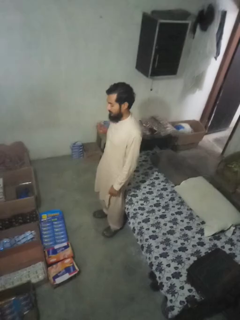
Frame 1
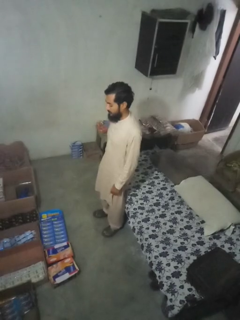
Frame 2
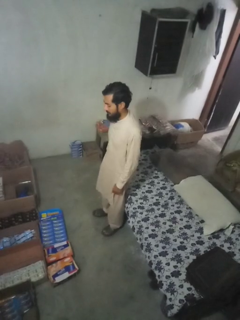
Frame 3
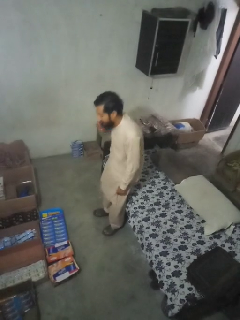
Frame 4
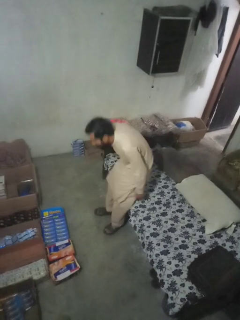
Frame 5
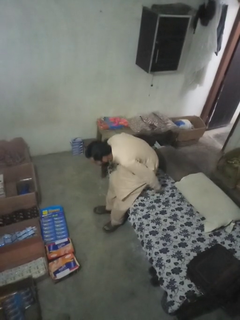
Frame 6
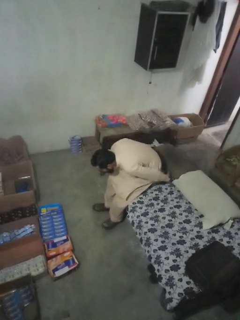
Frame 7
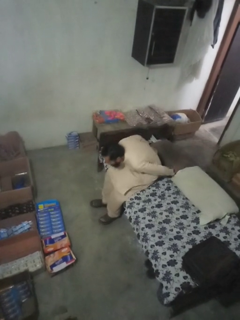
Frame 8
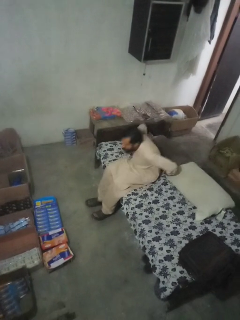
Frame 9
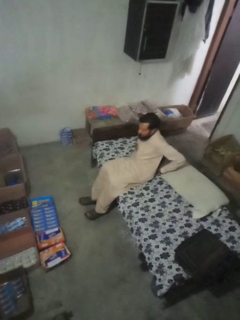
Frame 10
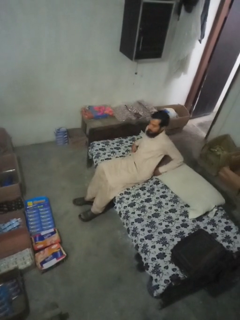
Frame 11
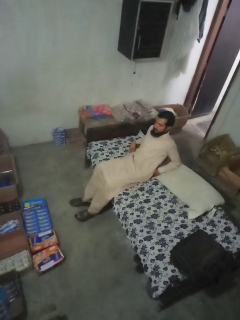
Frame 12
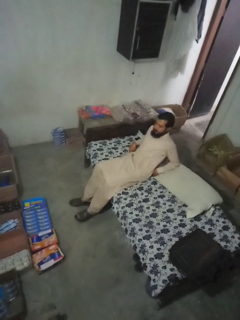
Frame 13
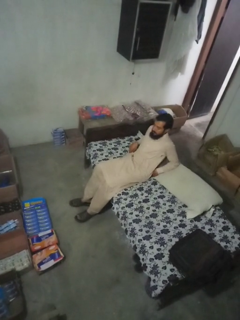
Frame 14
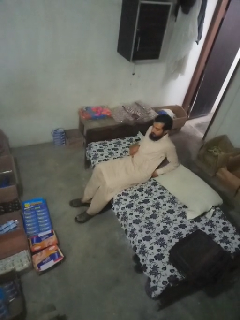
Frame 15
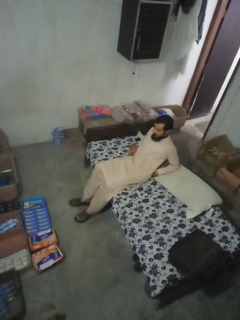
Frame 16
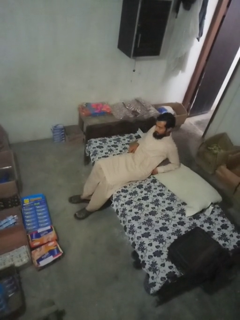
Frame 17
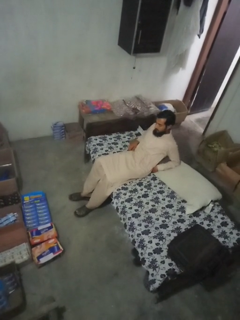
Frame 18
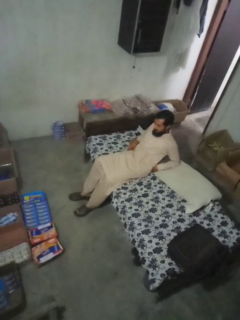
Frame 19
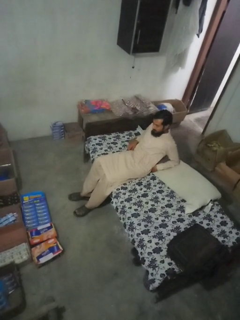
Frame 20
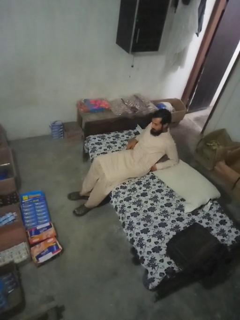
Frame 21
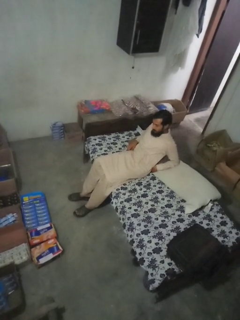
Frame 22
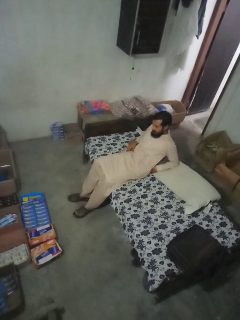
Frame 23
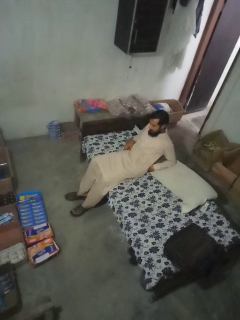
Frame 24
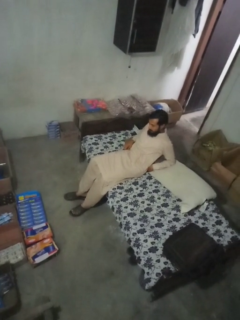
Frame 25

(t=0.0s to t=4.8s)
person lies down on couch

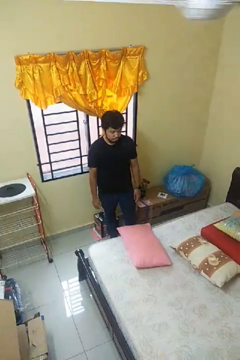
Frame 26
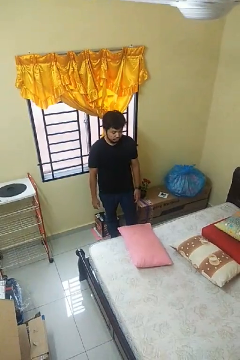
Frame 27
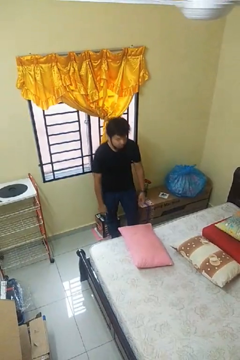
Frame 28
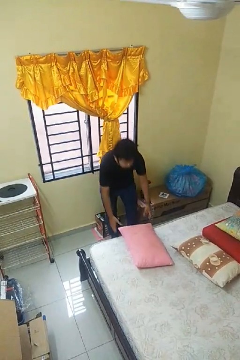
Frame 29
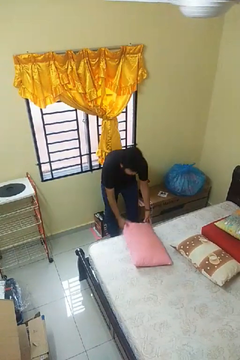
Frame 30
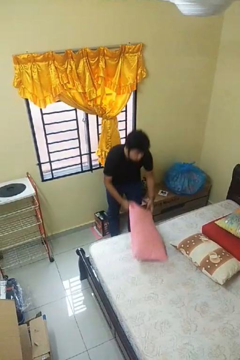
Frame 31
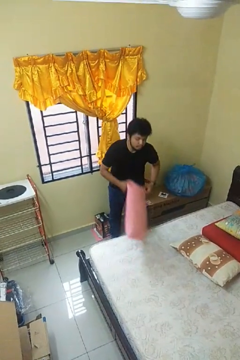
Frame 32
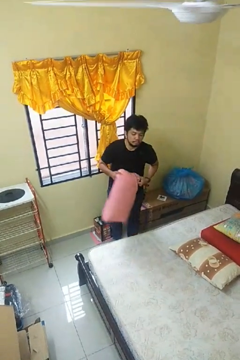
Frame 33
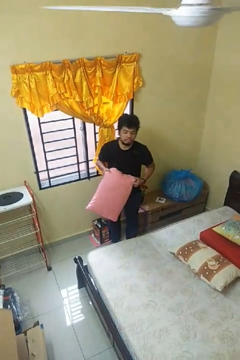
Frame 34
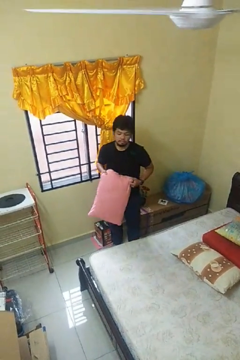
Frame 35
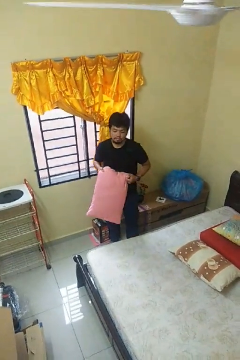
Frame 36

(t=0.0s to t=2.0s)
person picks up object from bed

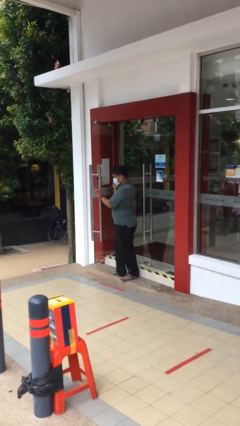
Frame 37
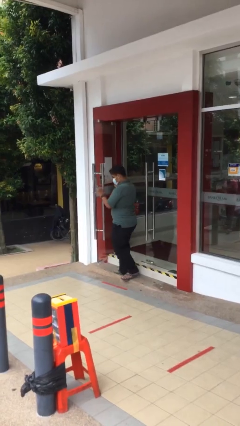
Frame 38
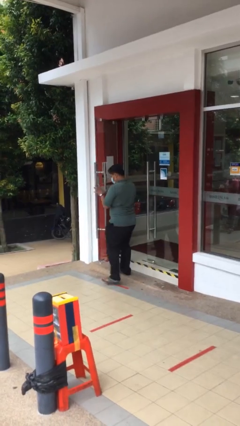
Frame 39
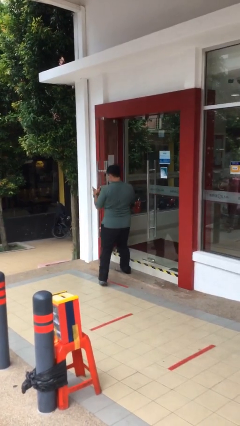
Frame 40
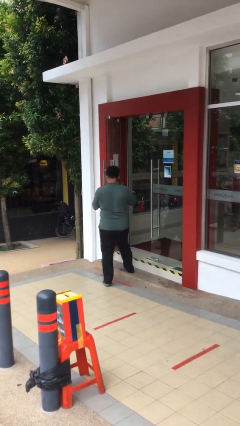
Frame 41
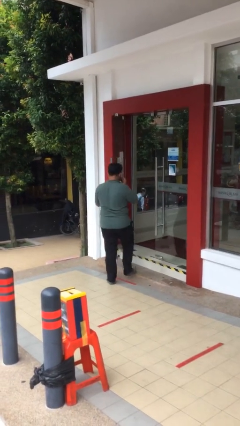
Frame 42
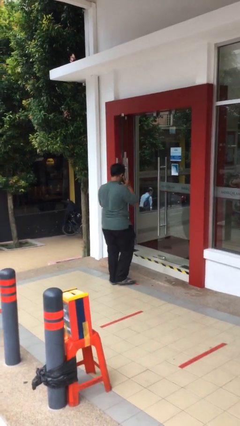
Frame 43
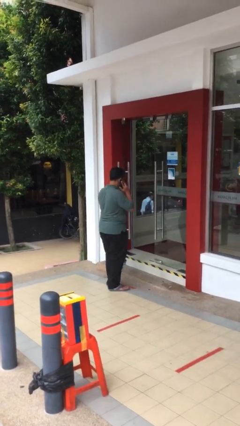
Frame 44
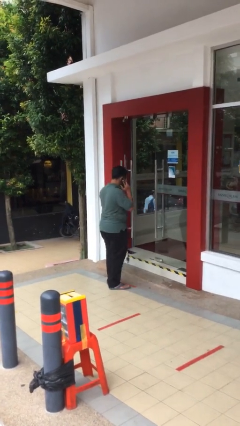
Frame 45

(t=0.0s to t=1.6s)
person enters scene through structure

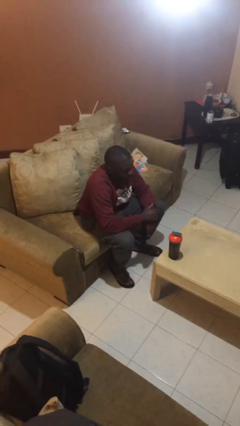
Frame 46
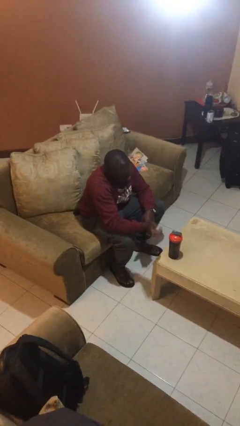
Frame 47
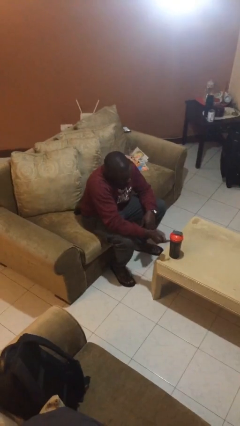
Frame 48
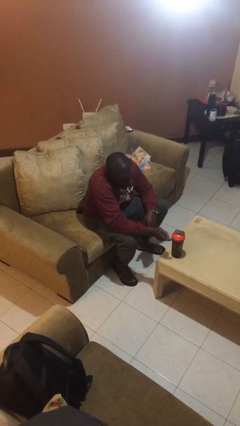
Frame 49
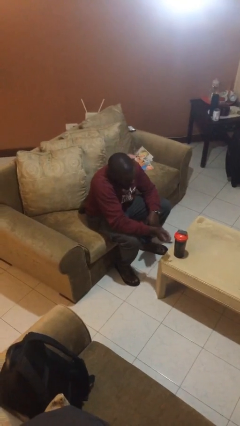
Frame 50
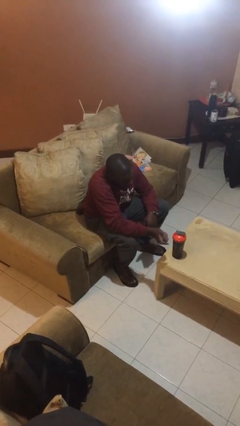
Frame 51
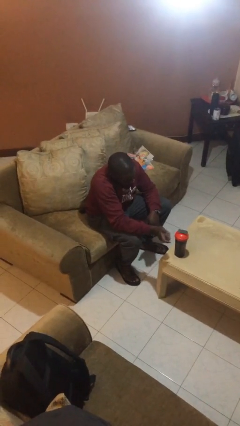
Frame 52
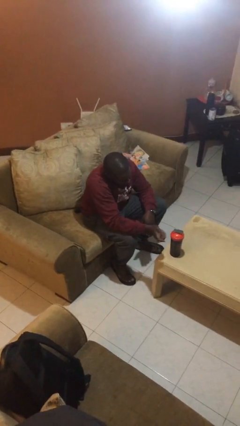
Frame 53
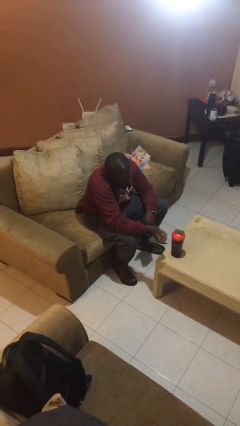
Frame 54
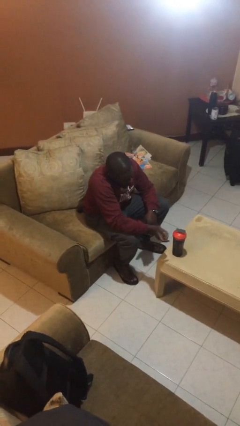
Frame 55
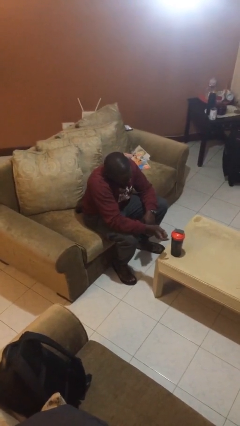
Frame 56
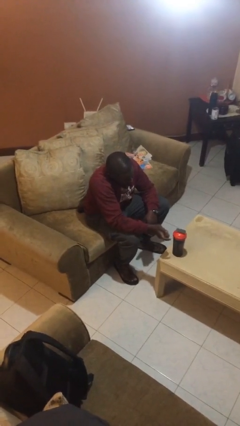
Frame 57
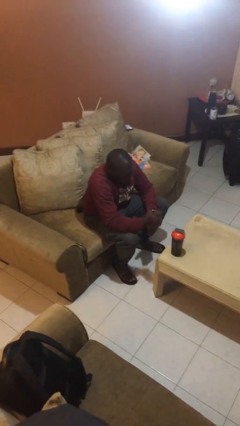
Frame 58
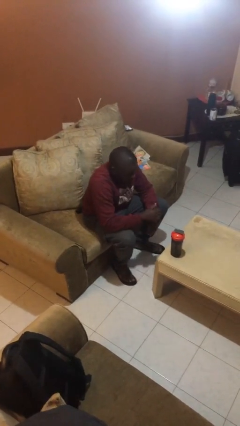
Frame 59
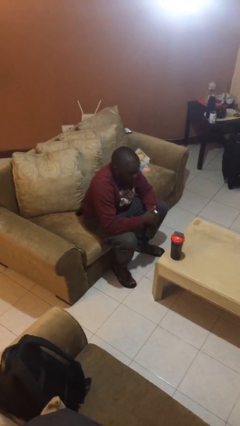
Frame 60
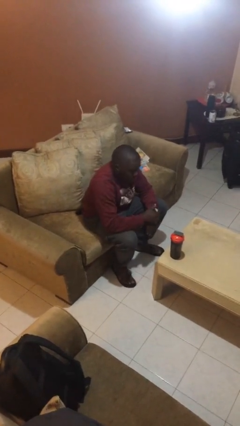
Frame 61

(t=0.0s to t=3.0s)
person taps object with finger

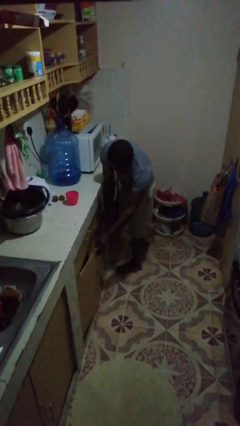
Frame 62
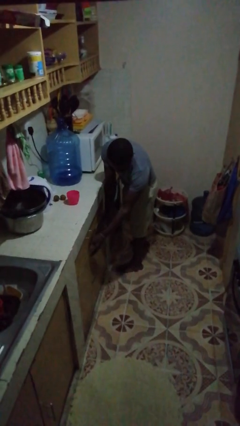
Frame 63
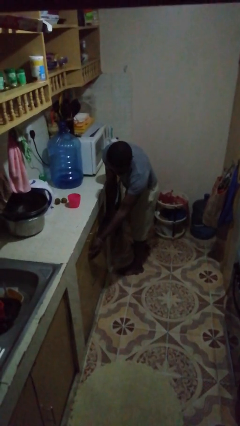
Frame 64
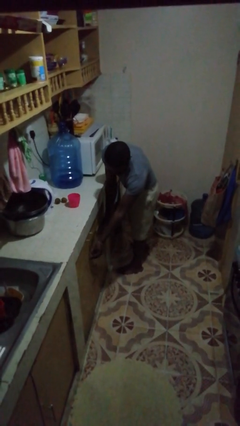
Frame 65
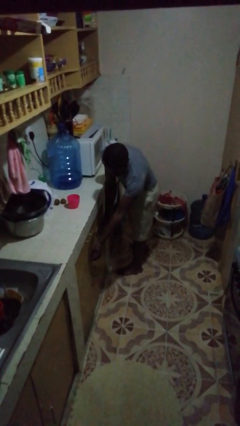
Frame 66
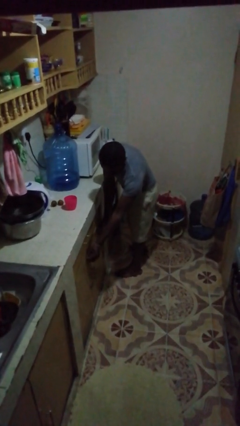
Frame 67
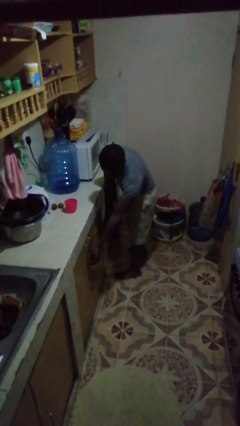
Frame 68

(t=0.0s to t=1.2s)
person closes cabinet

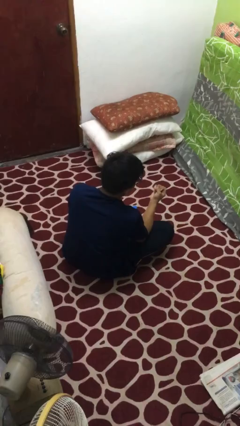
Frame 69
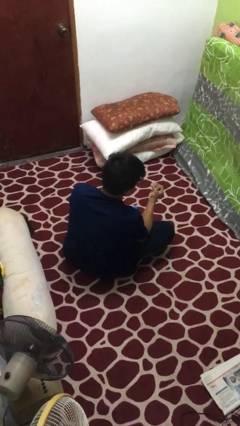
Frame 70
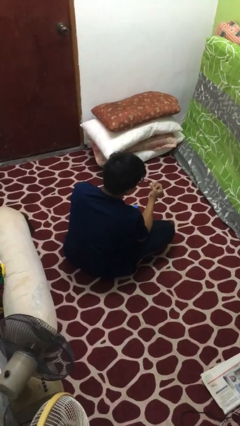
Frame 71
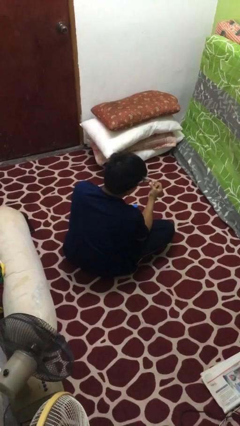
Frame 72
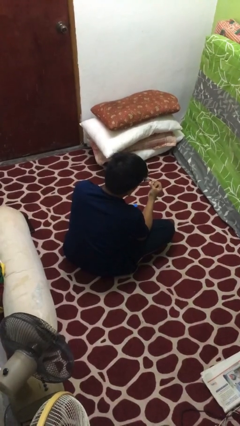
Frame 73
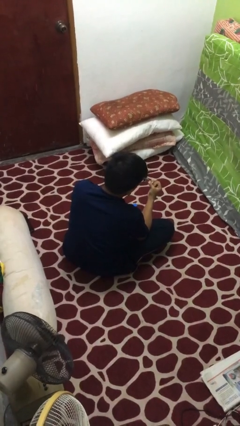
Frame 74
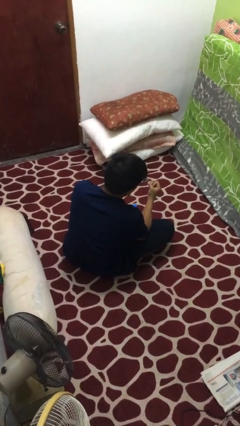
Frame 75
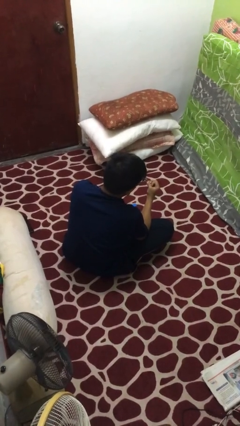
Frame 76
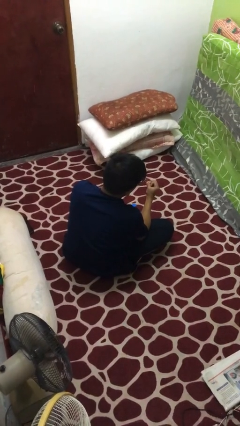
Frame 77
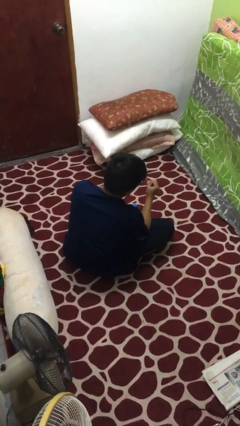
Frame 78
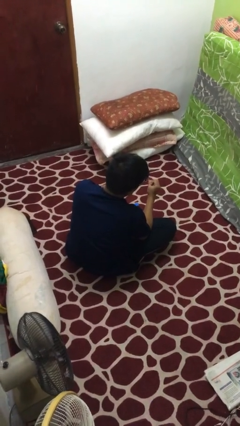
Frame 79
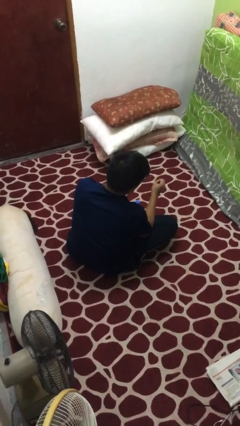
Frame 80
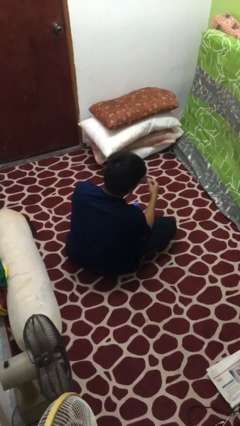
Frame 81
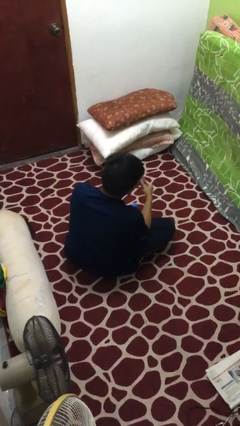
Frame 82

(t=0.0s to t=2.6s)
person clips fingernails

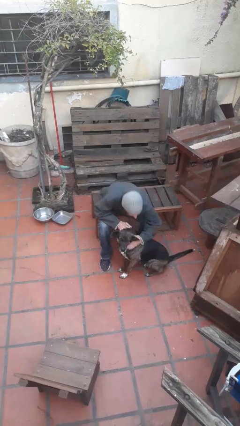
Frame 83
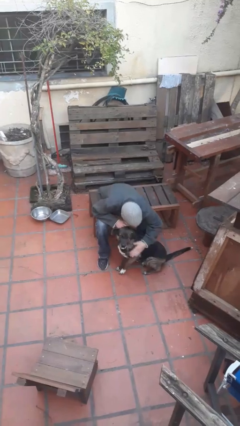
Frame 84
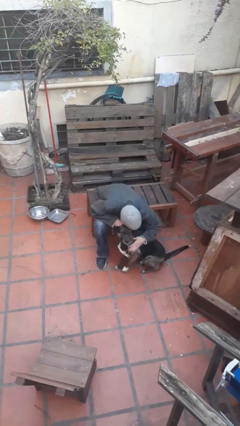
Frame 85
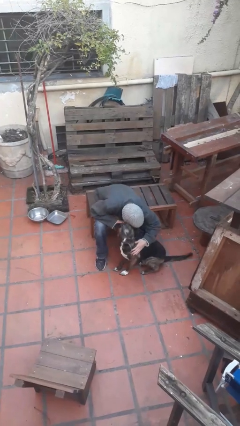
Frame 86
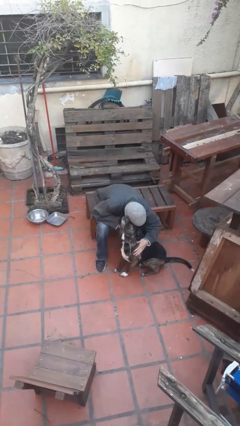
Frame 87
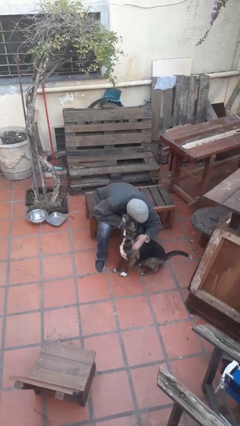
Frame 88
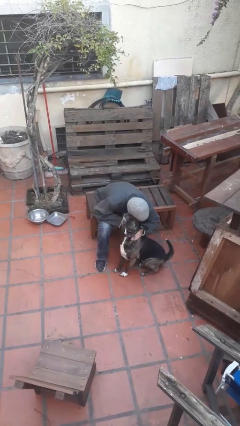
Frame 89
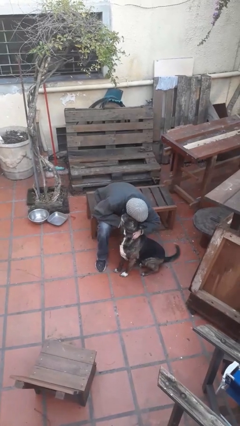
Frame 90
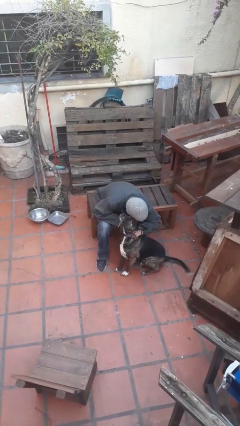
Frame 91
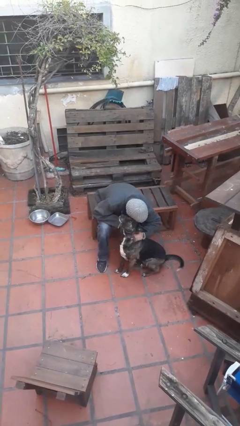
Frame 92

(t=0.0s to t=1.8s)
person hugs dog

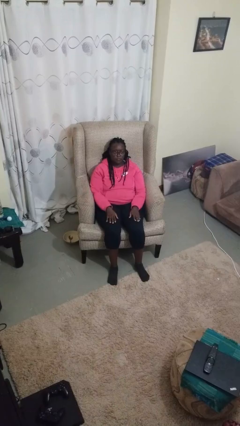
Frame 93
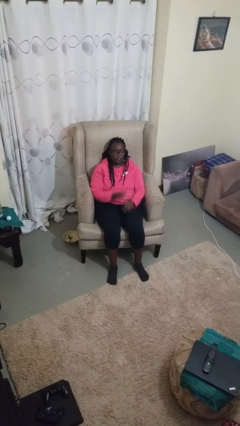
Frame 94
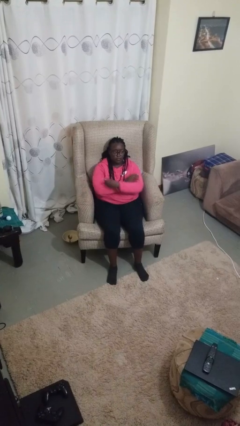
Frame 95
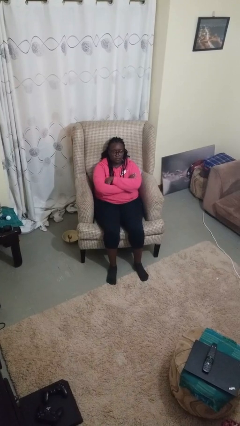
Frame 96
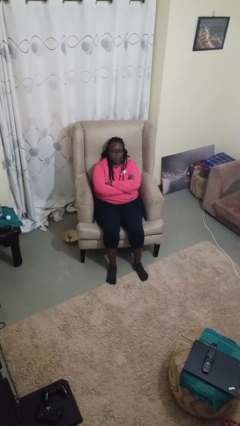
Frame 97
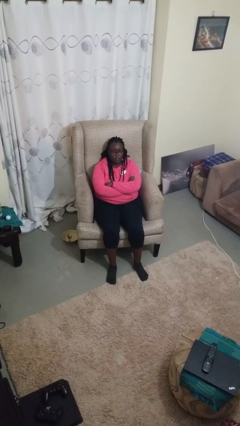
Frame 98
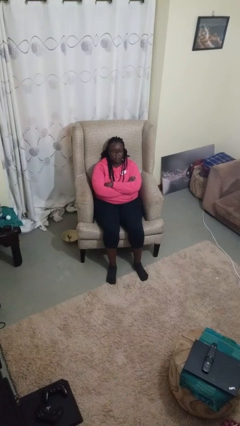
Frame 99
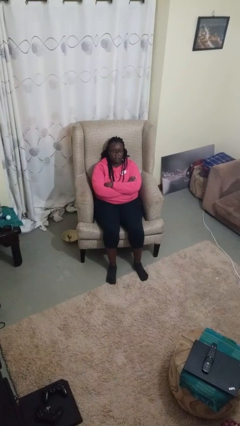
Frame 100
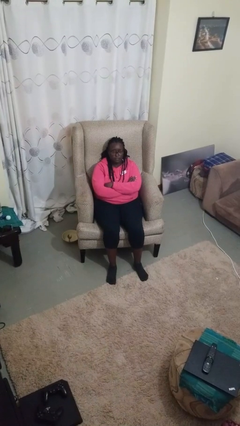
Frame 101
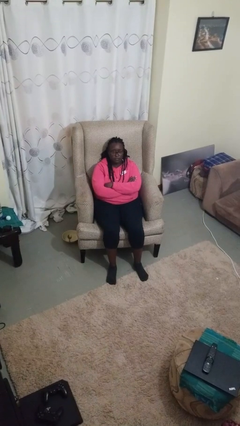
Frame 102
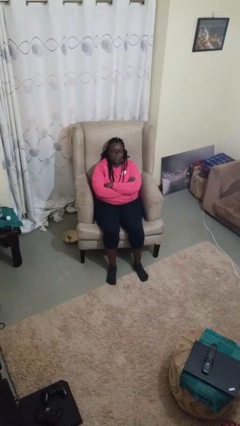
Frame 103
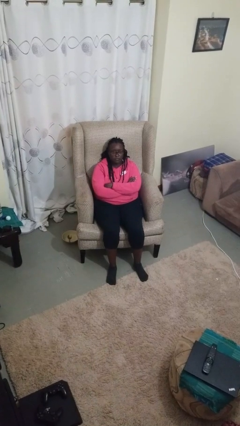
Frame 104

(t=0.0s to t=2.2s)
person crosses arms
